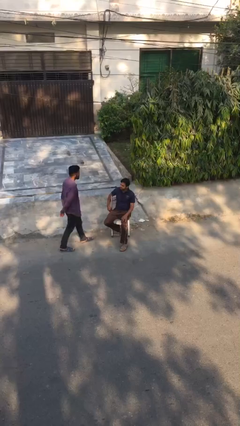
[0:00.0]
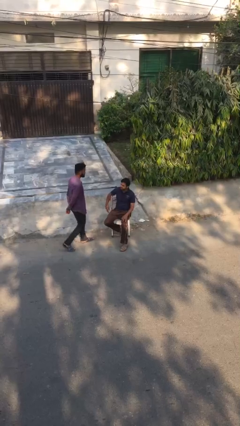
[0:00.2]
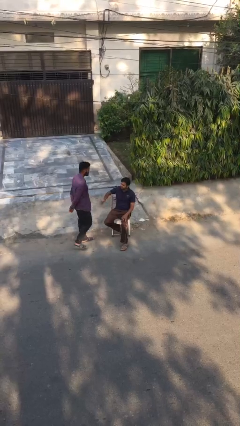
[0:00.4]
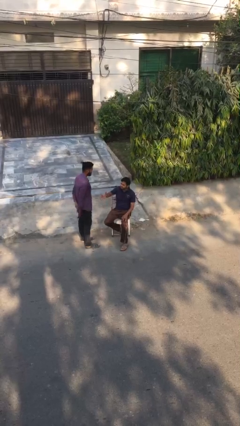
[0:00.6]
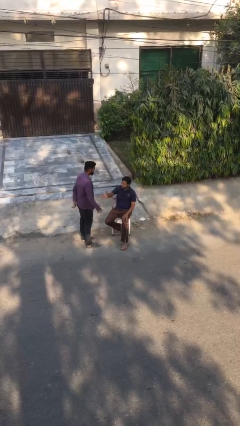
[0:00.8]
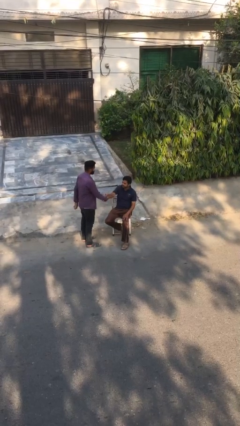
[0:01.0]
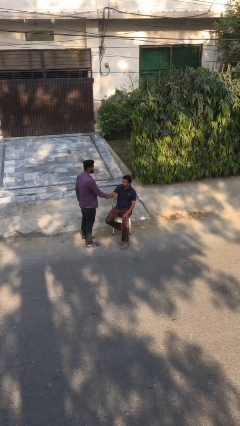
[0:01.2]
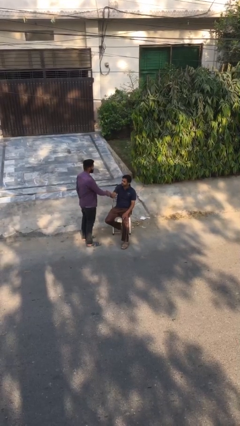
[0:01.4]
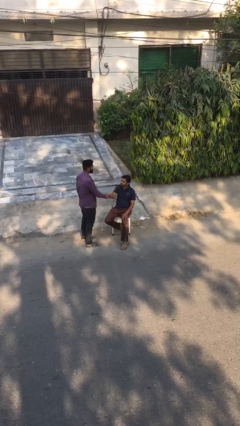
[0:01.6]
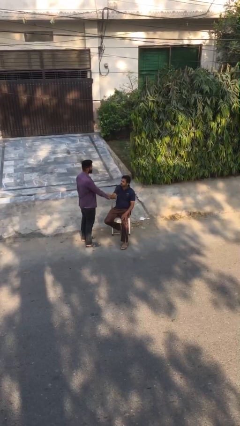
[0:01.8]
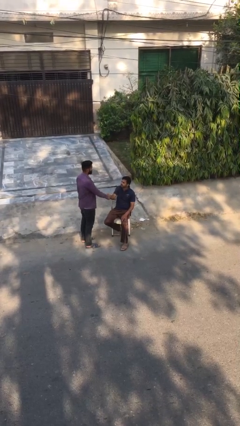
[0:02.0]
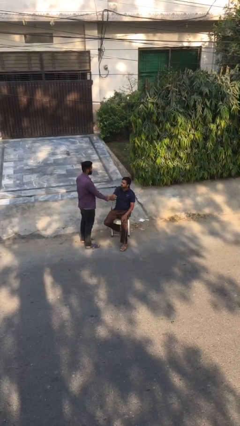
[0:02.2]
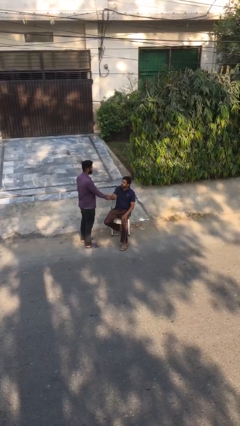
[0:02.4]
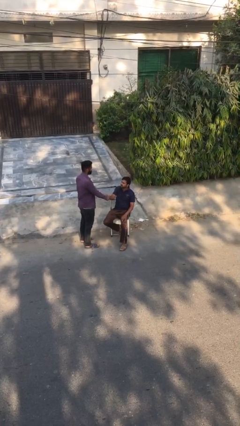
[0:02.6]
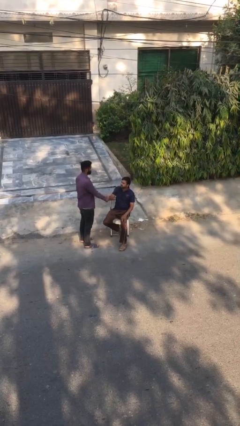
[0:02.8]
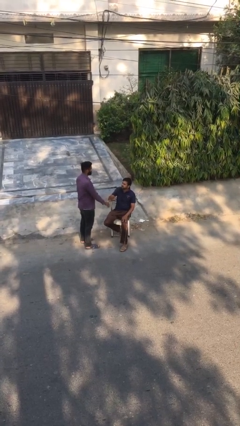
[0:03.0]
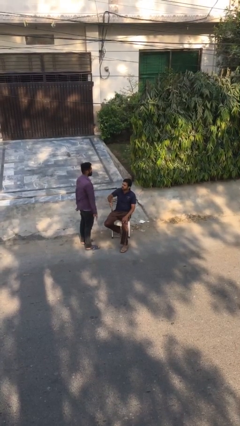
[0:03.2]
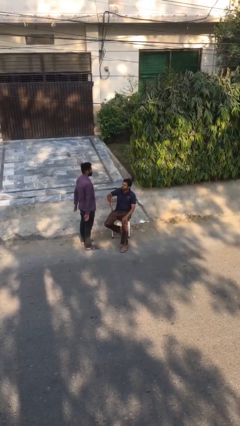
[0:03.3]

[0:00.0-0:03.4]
person shakes hand

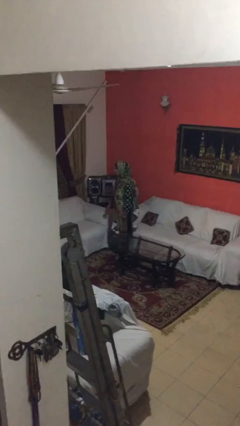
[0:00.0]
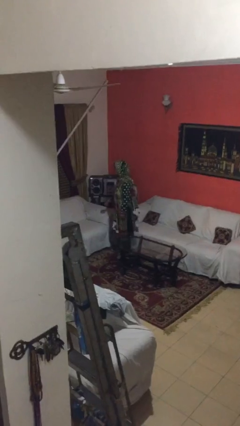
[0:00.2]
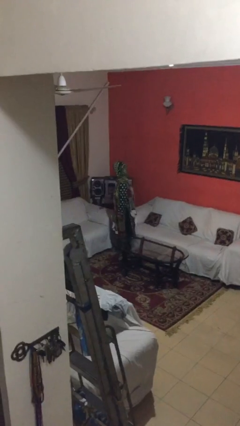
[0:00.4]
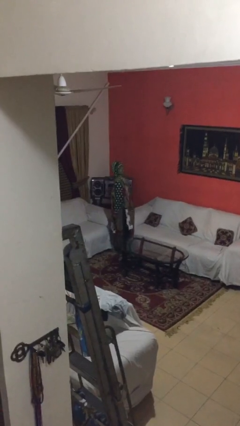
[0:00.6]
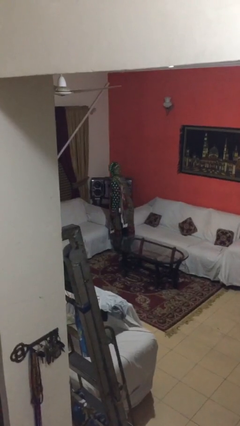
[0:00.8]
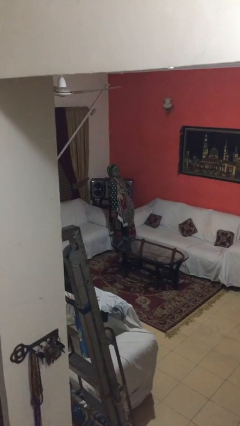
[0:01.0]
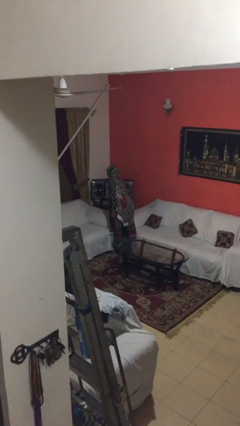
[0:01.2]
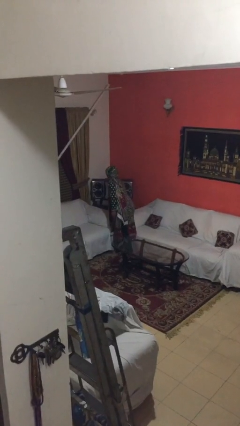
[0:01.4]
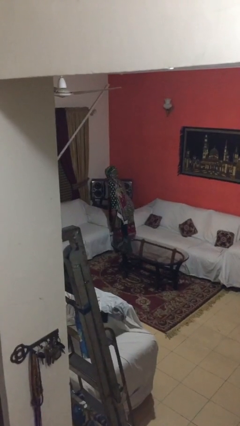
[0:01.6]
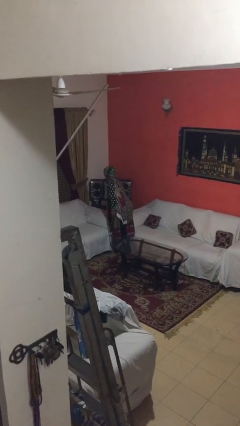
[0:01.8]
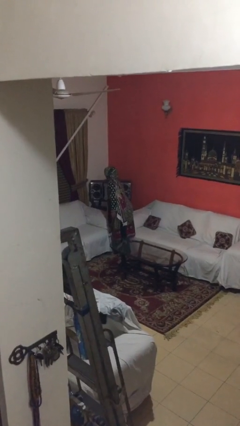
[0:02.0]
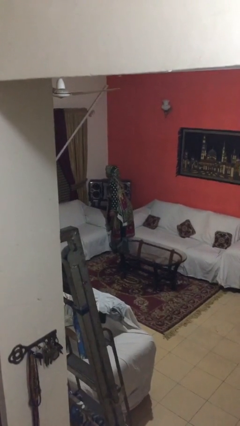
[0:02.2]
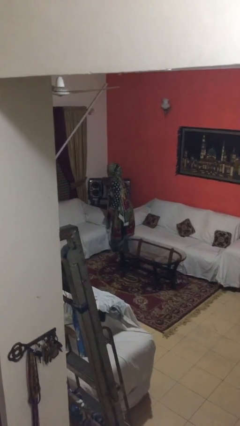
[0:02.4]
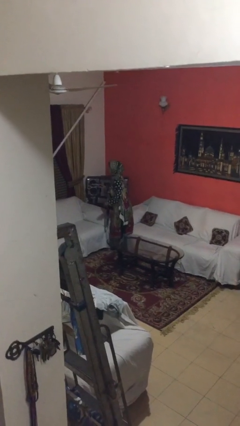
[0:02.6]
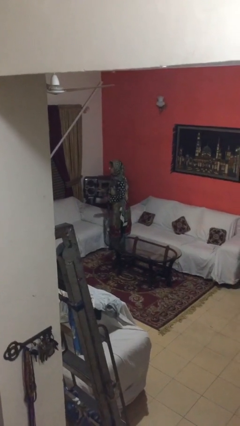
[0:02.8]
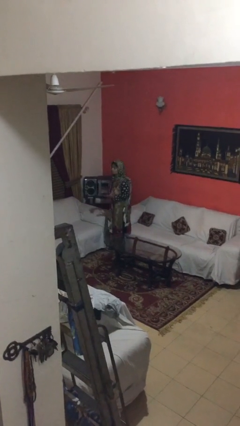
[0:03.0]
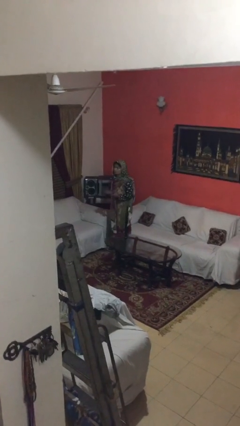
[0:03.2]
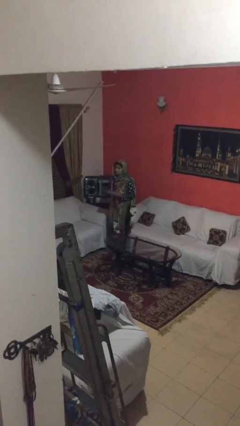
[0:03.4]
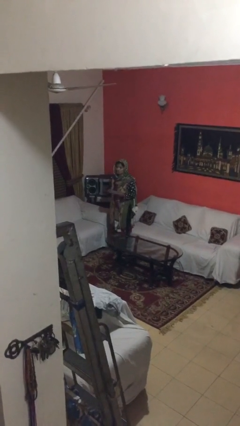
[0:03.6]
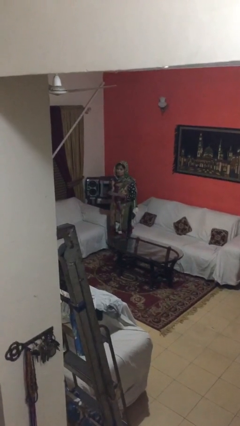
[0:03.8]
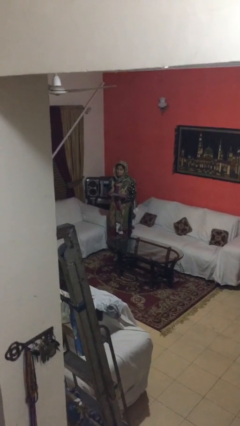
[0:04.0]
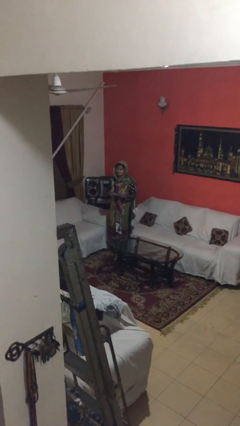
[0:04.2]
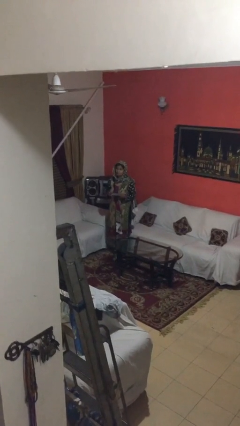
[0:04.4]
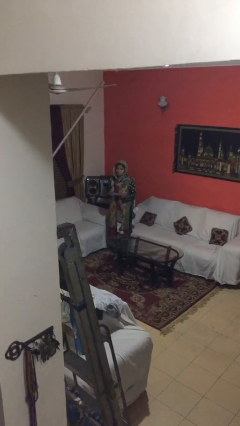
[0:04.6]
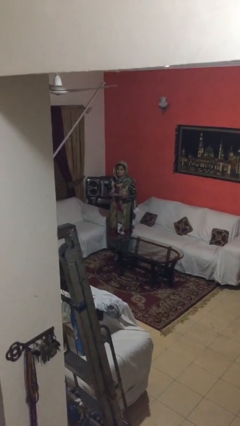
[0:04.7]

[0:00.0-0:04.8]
person picks up object from shelf

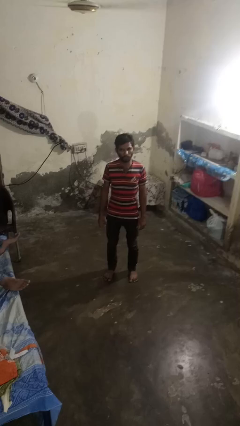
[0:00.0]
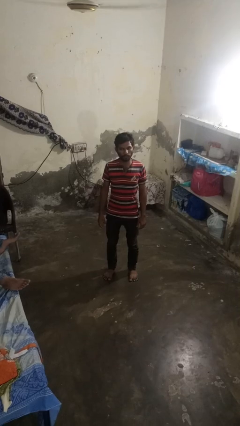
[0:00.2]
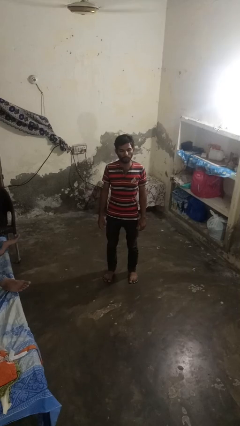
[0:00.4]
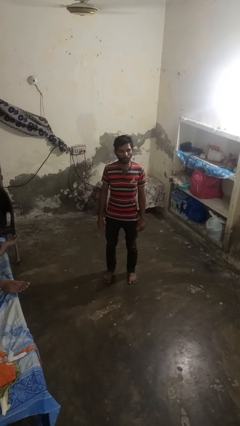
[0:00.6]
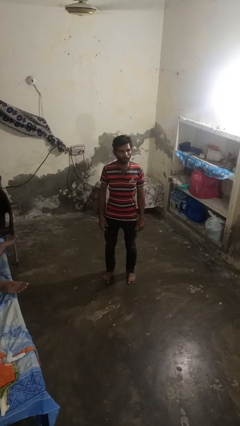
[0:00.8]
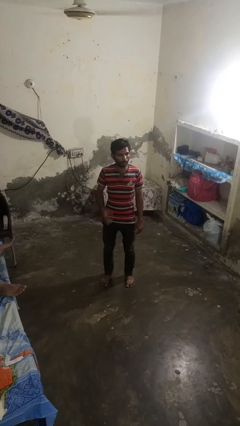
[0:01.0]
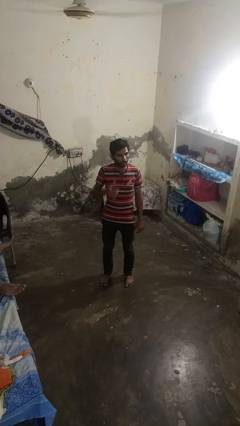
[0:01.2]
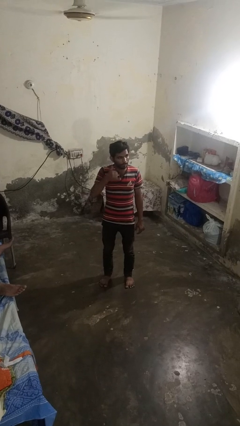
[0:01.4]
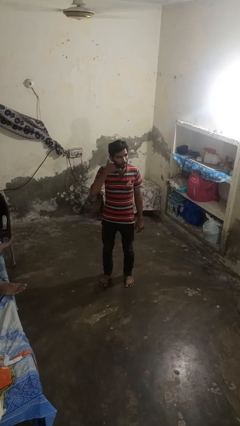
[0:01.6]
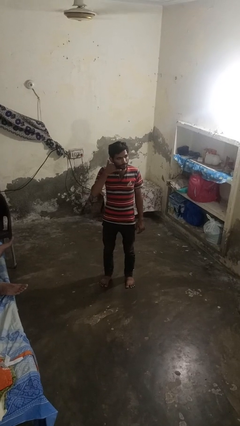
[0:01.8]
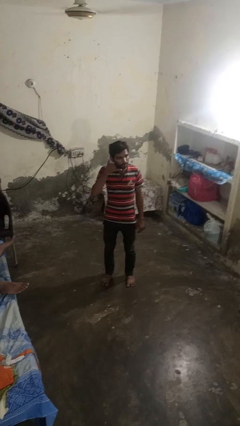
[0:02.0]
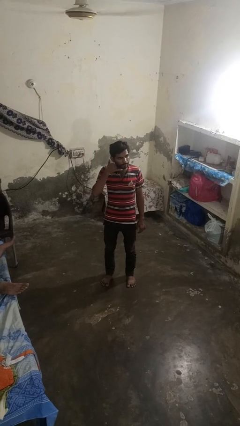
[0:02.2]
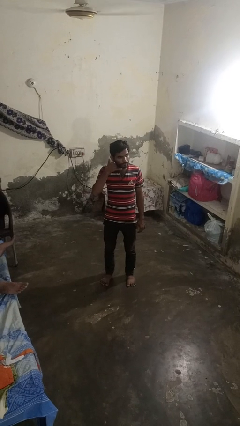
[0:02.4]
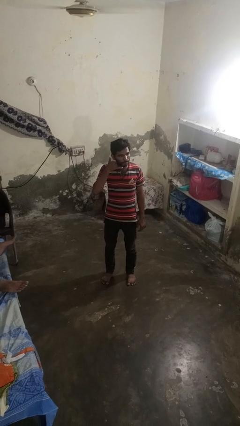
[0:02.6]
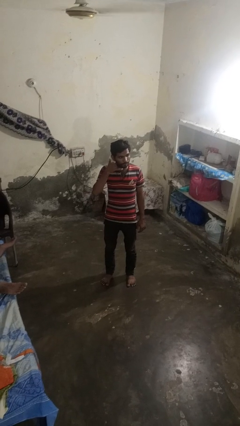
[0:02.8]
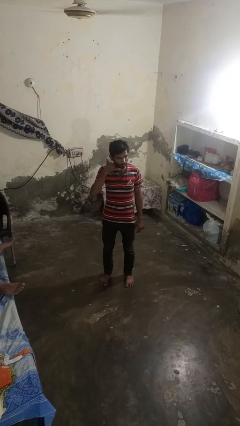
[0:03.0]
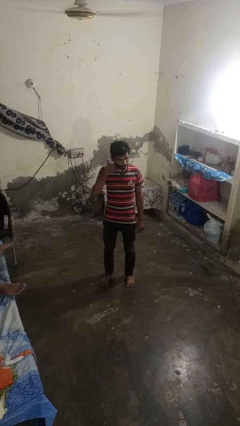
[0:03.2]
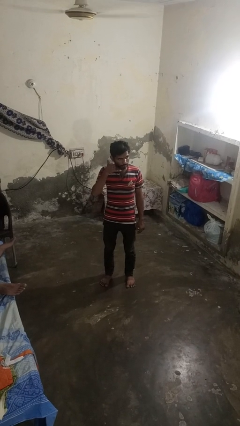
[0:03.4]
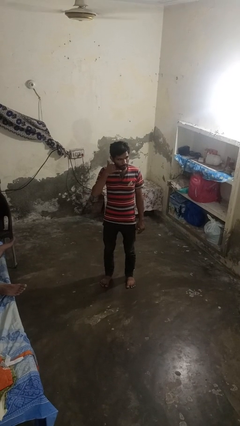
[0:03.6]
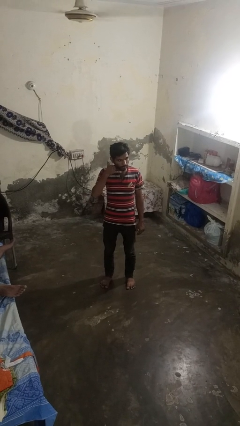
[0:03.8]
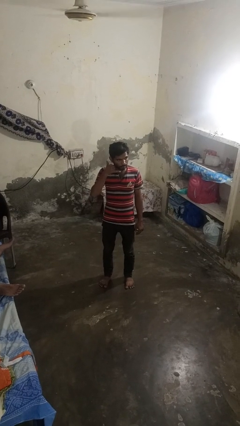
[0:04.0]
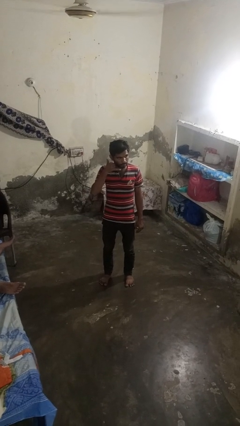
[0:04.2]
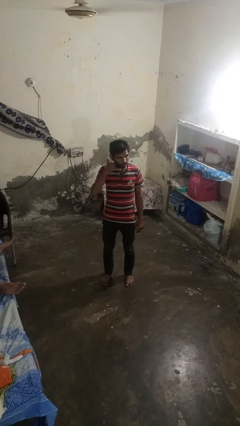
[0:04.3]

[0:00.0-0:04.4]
person gestures call me

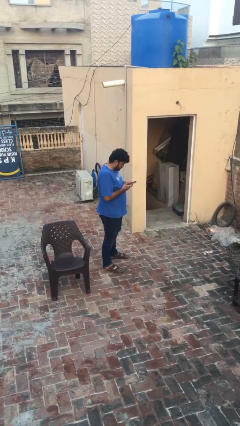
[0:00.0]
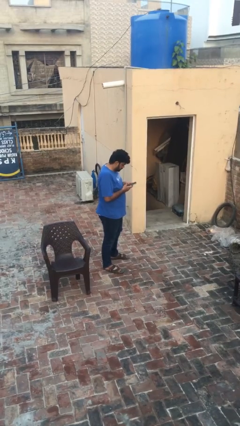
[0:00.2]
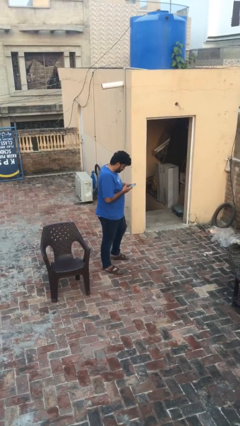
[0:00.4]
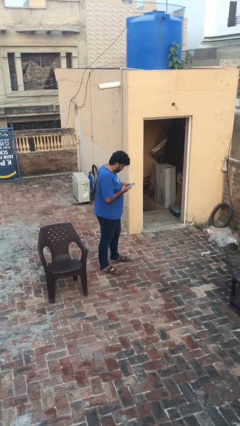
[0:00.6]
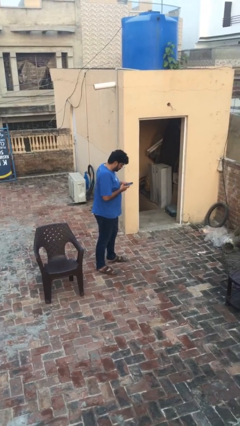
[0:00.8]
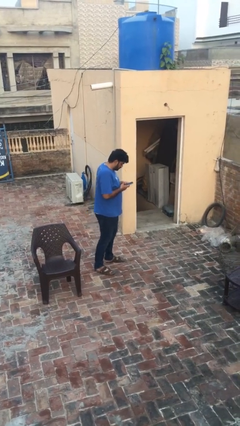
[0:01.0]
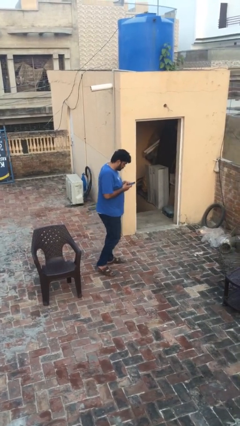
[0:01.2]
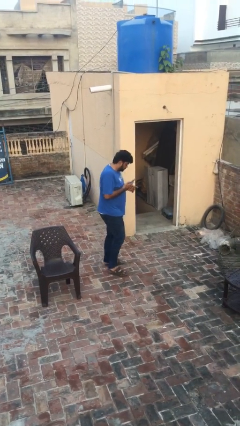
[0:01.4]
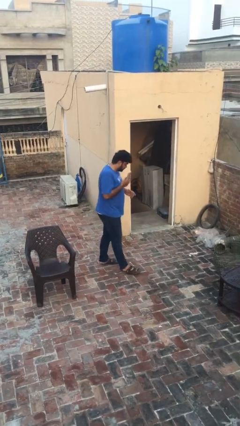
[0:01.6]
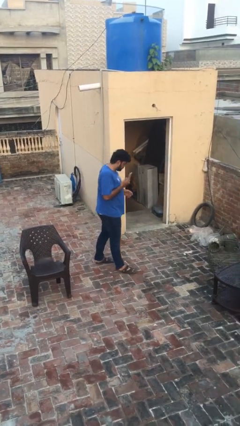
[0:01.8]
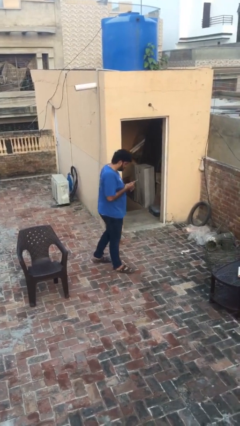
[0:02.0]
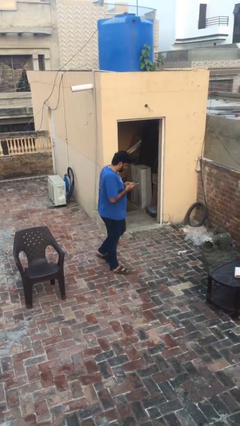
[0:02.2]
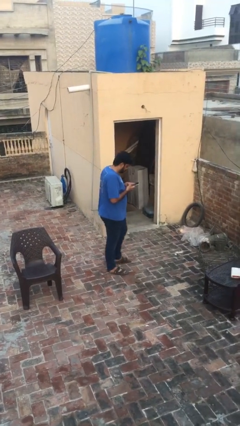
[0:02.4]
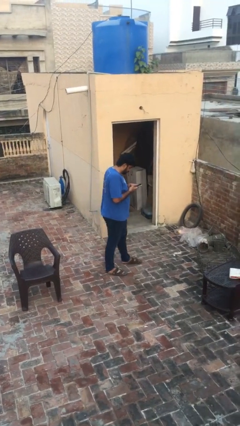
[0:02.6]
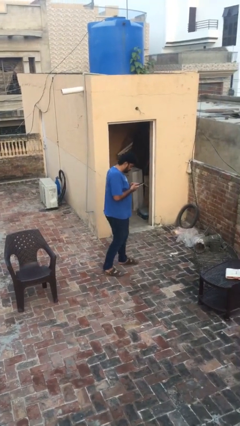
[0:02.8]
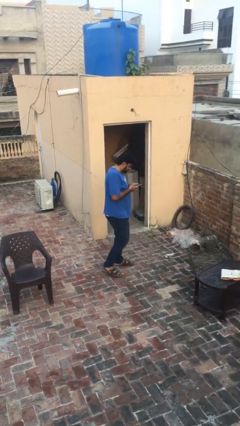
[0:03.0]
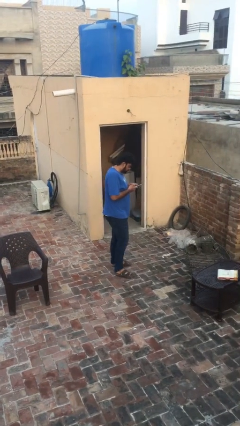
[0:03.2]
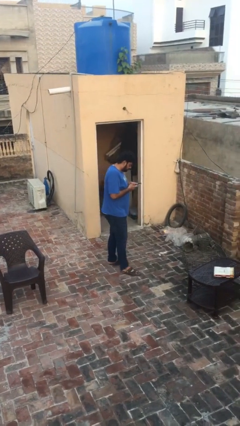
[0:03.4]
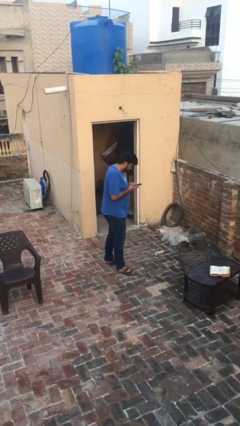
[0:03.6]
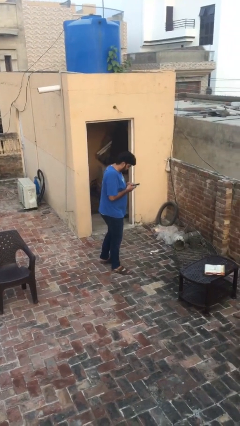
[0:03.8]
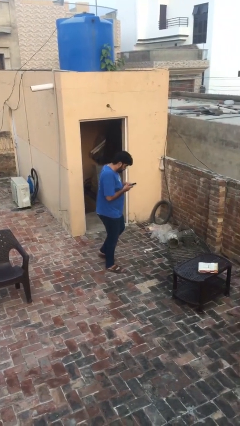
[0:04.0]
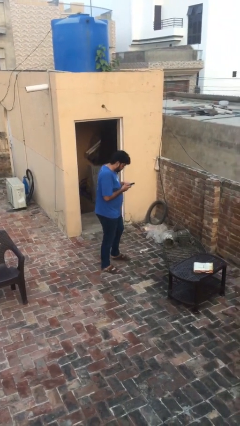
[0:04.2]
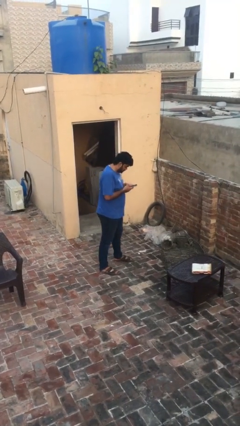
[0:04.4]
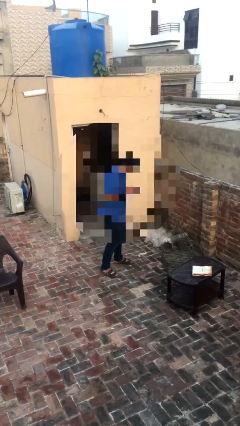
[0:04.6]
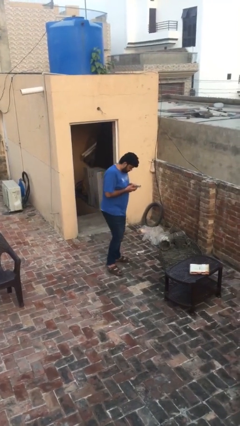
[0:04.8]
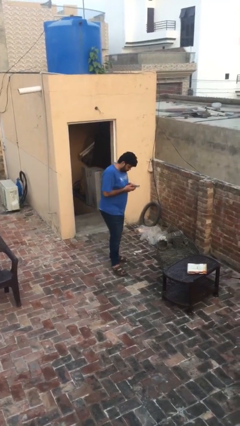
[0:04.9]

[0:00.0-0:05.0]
person texts on phone
